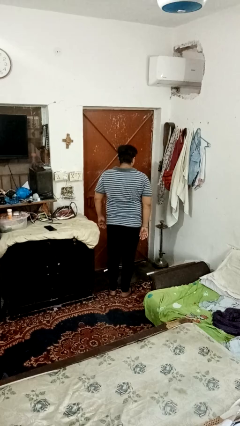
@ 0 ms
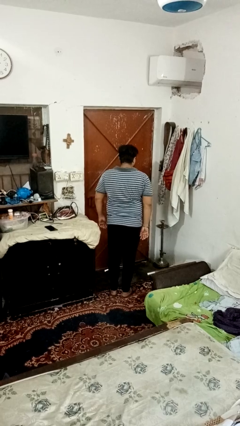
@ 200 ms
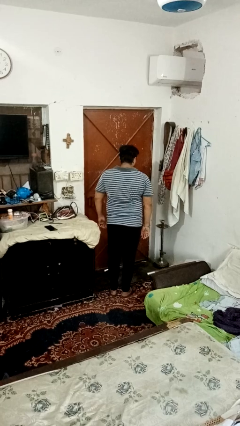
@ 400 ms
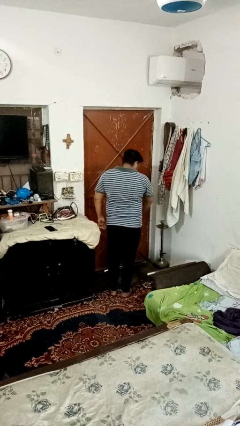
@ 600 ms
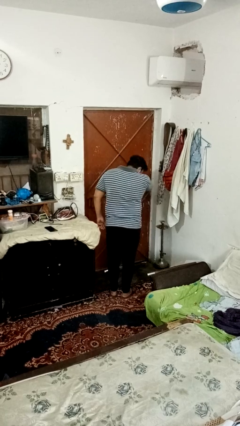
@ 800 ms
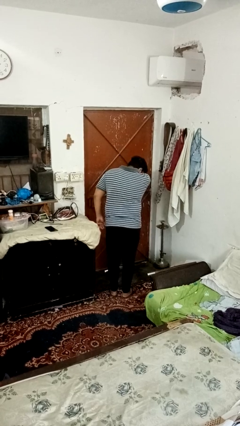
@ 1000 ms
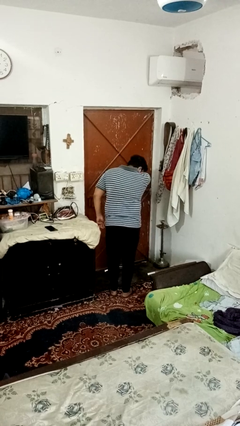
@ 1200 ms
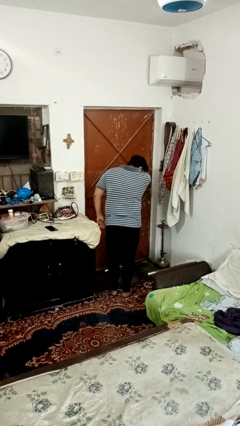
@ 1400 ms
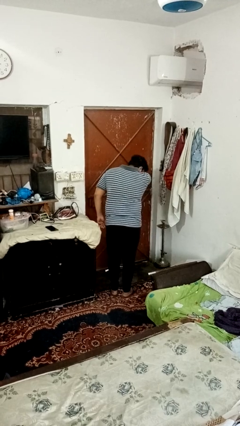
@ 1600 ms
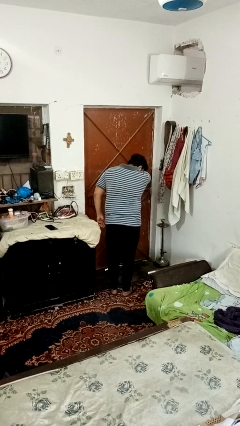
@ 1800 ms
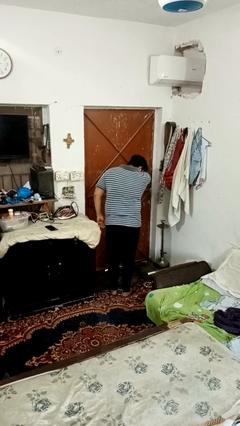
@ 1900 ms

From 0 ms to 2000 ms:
person sneezes into arm

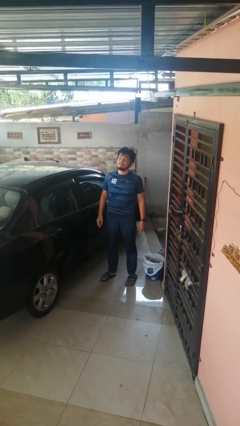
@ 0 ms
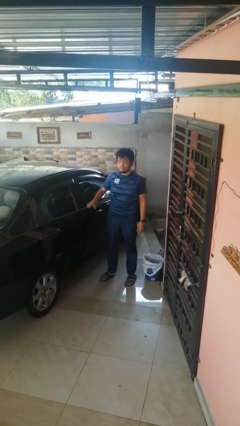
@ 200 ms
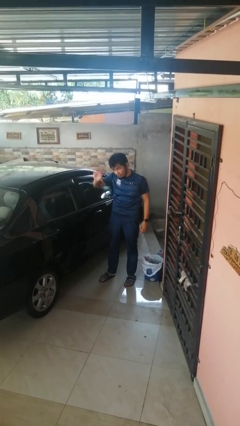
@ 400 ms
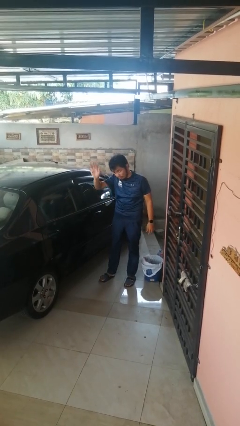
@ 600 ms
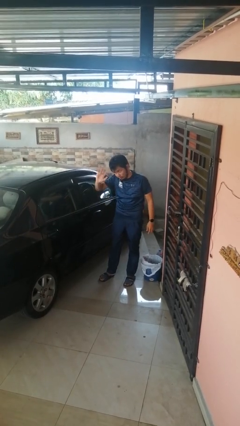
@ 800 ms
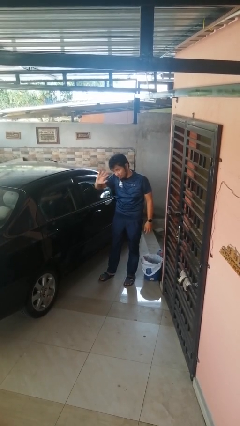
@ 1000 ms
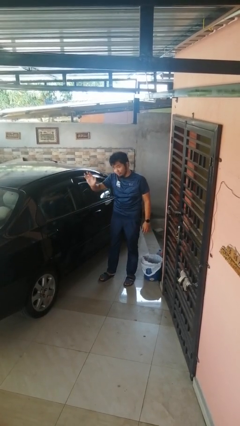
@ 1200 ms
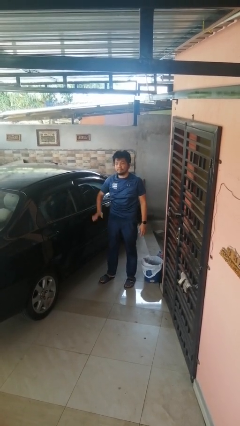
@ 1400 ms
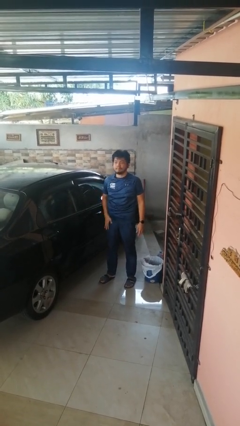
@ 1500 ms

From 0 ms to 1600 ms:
person waves at person

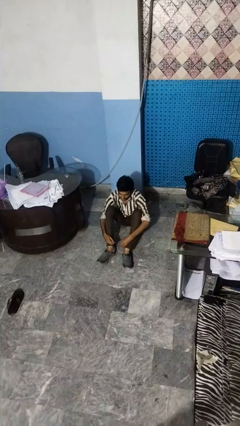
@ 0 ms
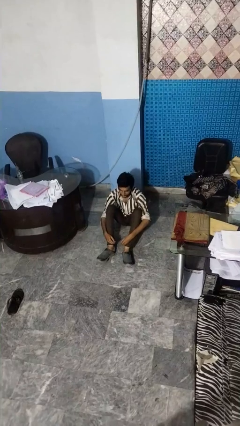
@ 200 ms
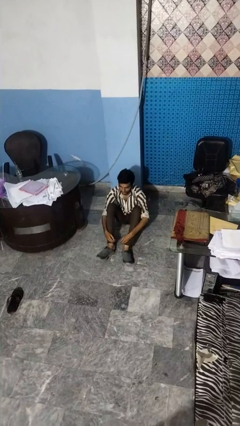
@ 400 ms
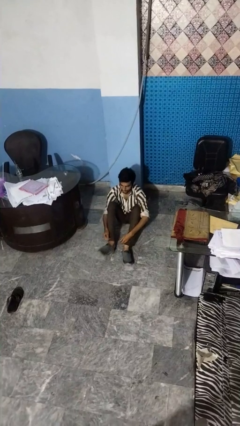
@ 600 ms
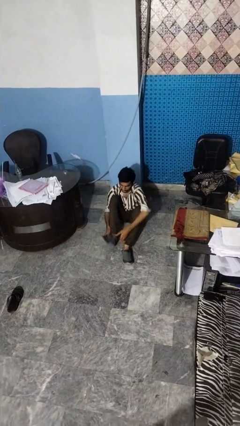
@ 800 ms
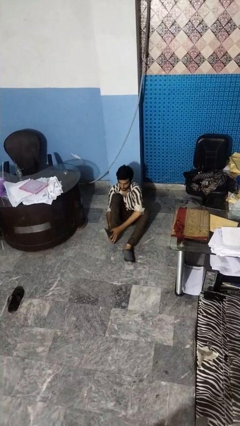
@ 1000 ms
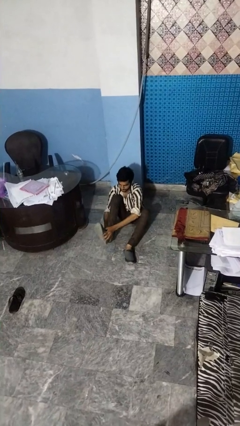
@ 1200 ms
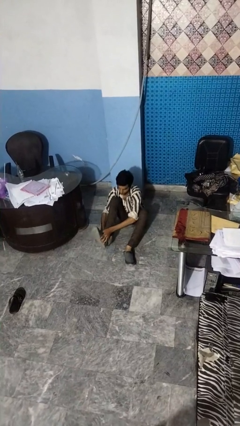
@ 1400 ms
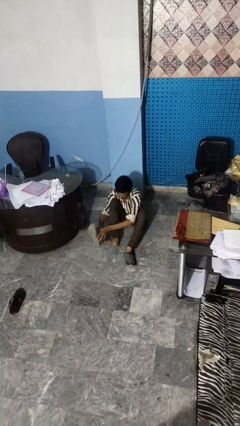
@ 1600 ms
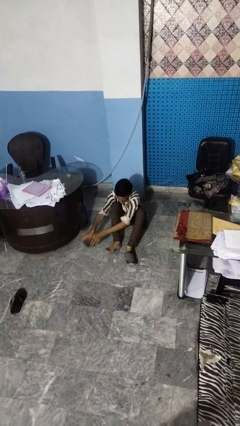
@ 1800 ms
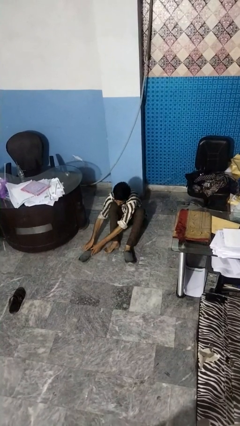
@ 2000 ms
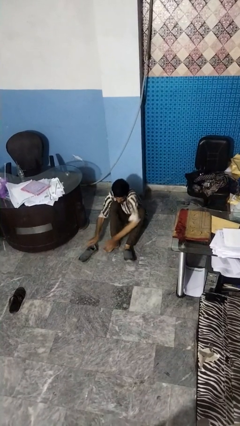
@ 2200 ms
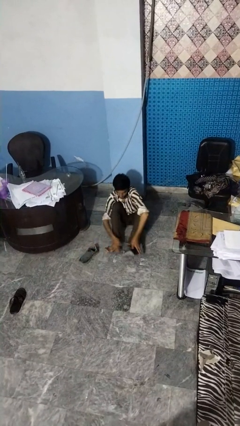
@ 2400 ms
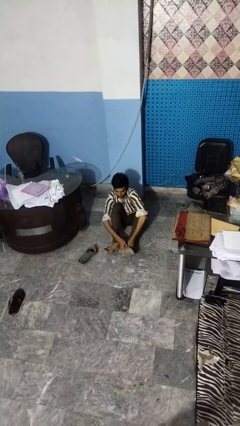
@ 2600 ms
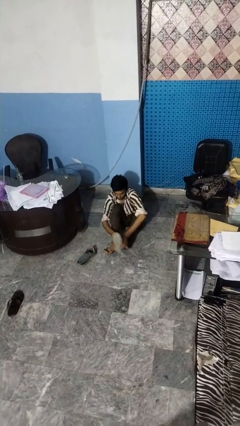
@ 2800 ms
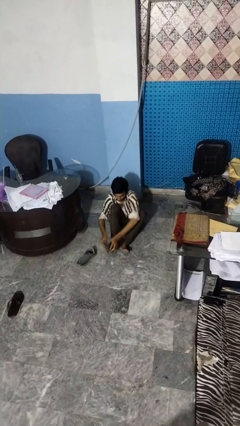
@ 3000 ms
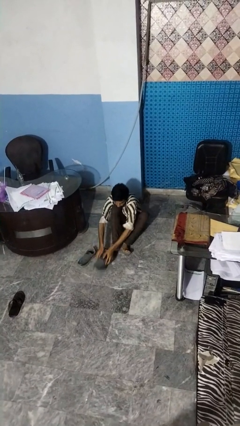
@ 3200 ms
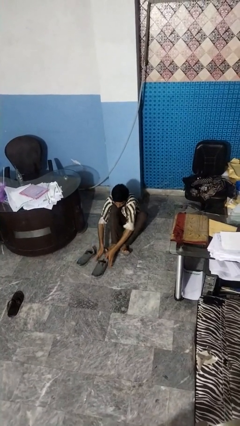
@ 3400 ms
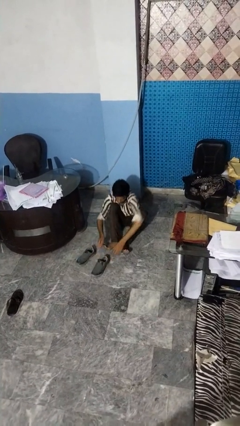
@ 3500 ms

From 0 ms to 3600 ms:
person takes off shoes

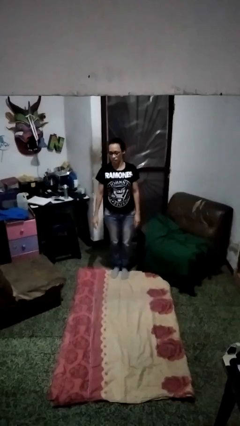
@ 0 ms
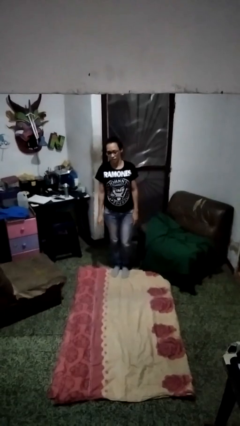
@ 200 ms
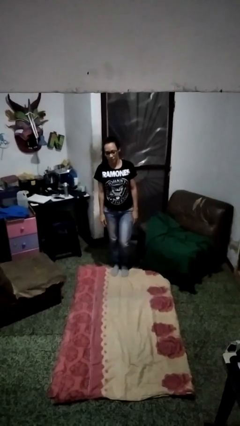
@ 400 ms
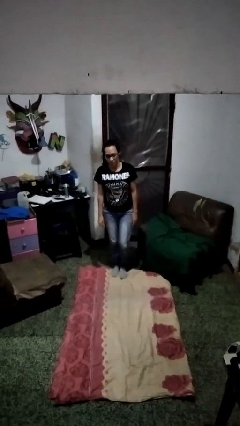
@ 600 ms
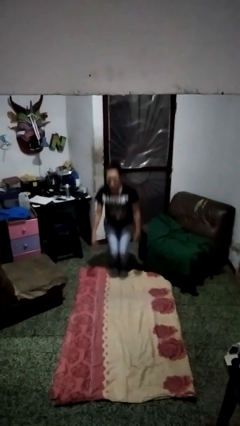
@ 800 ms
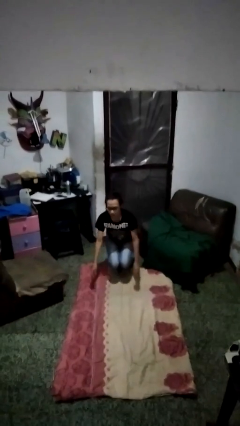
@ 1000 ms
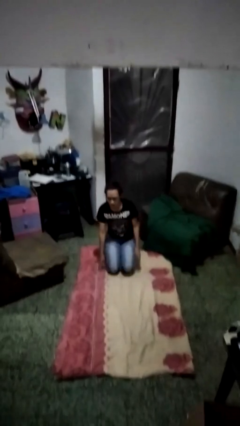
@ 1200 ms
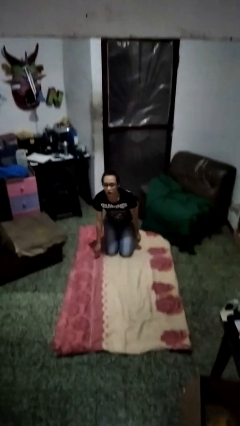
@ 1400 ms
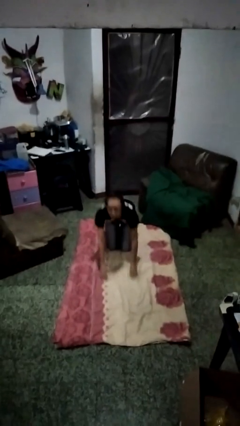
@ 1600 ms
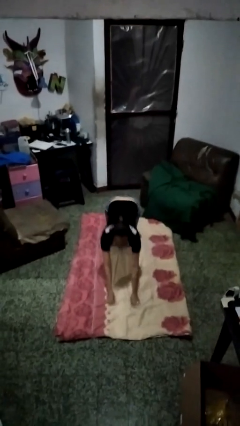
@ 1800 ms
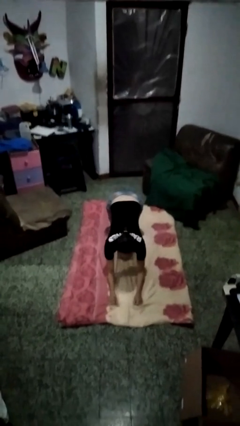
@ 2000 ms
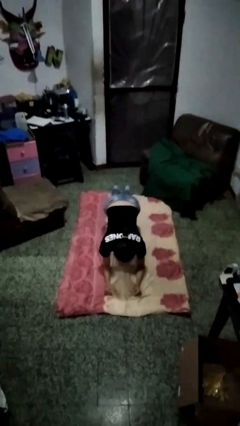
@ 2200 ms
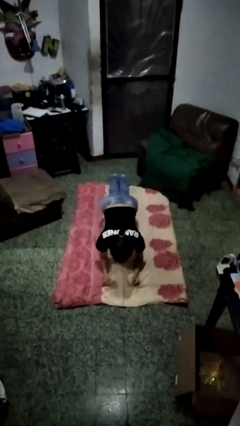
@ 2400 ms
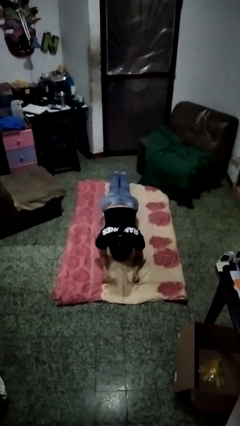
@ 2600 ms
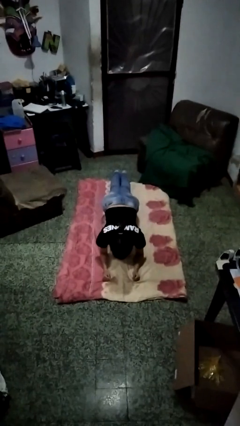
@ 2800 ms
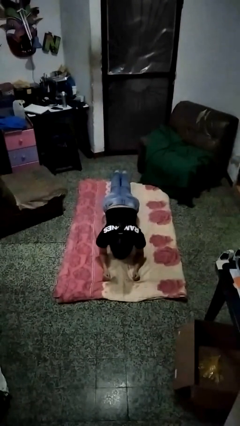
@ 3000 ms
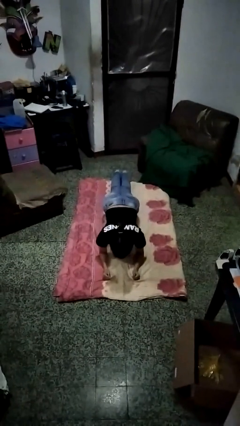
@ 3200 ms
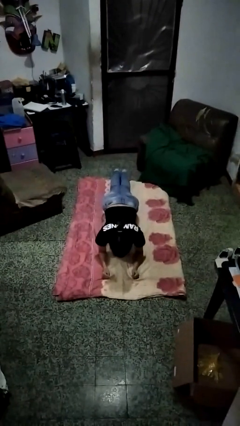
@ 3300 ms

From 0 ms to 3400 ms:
person exercises with plank

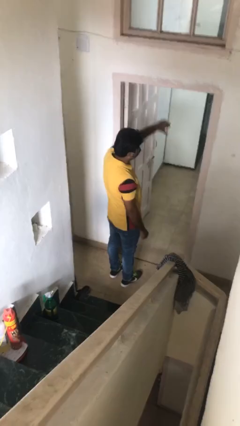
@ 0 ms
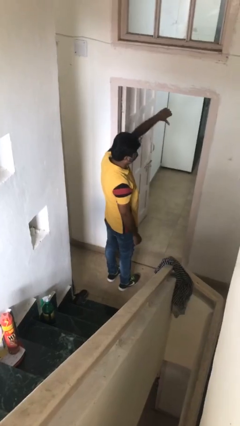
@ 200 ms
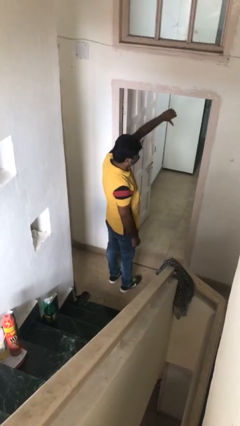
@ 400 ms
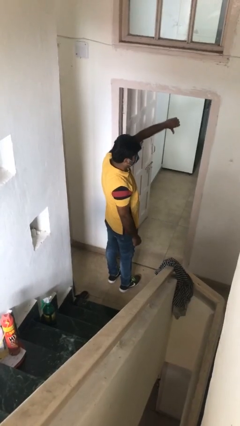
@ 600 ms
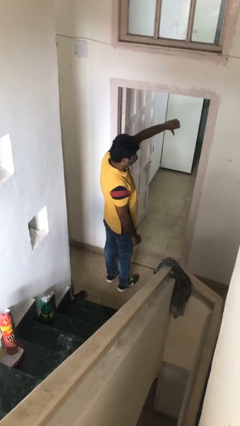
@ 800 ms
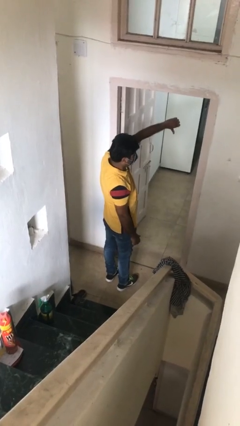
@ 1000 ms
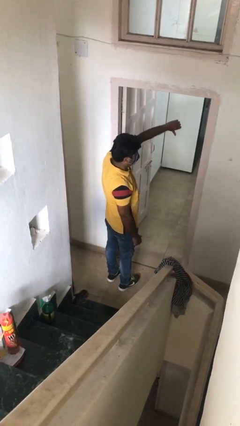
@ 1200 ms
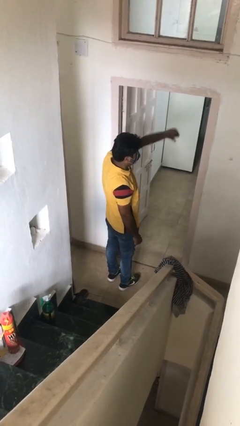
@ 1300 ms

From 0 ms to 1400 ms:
person gestures thumbs down

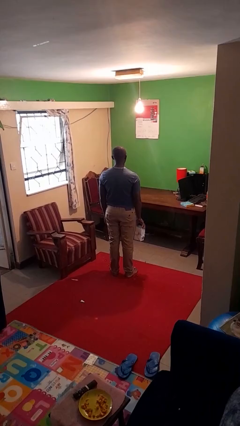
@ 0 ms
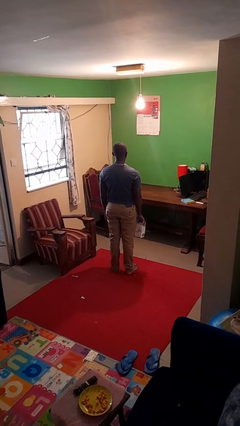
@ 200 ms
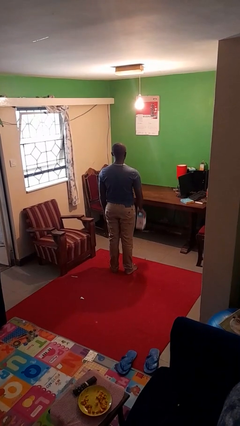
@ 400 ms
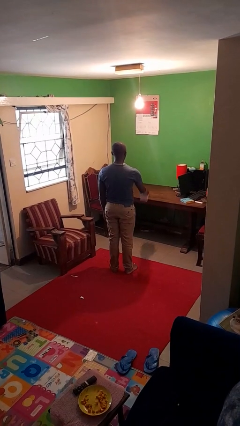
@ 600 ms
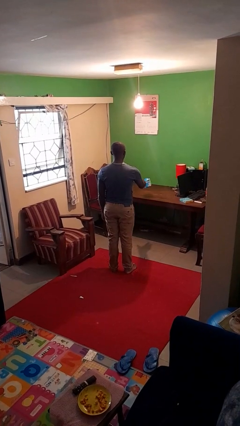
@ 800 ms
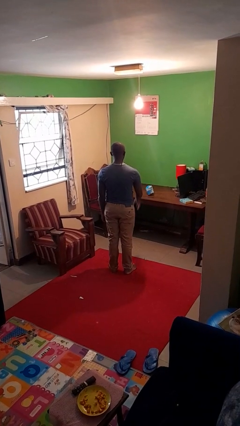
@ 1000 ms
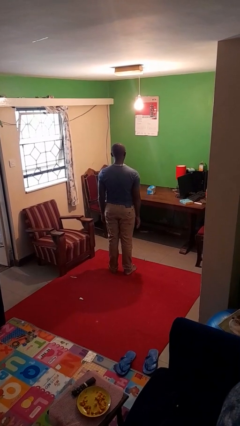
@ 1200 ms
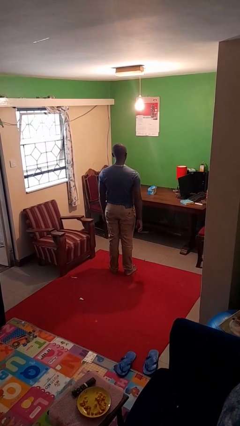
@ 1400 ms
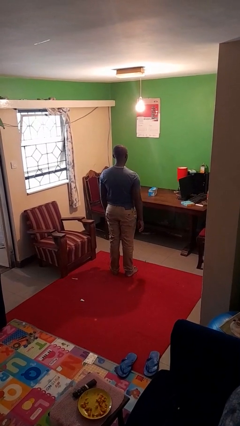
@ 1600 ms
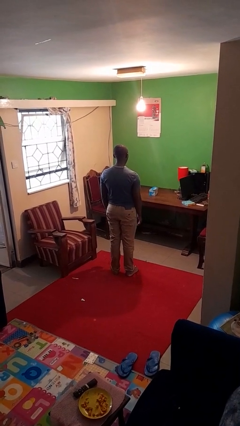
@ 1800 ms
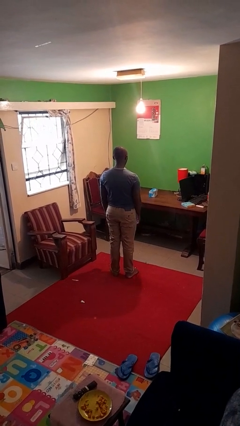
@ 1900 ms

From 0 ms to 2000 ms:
person throws object on table

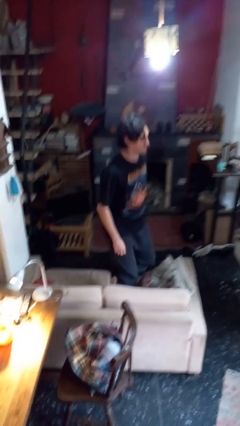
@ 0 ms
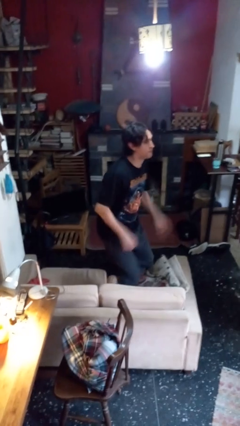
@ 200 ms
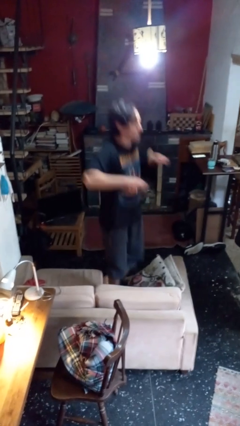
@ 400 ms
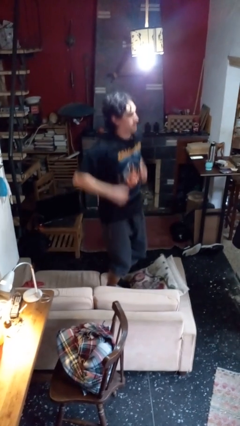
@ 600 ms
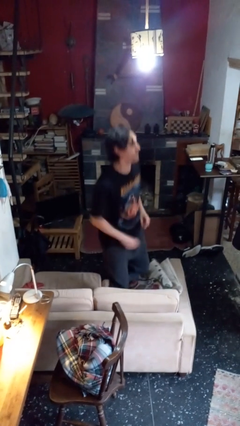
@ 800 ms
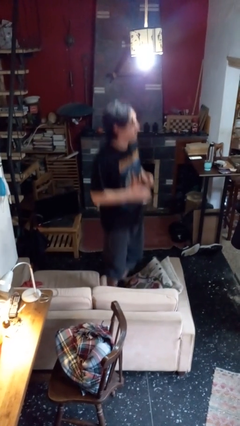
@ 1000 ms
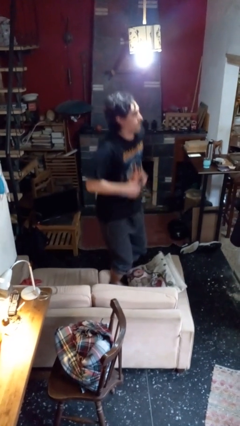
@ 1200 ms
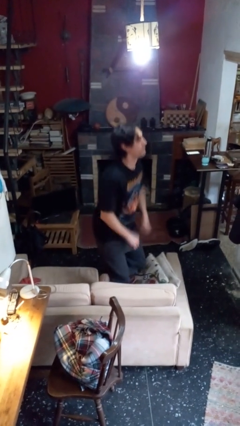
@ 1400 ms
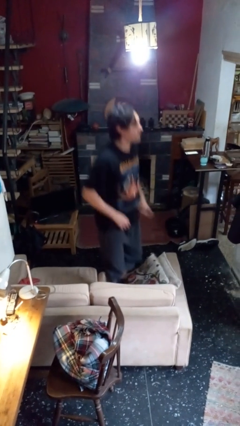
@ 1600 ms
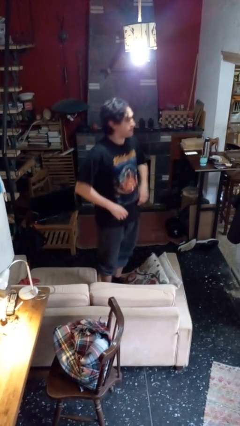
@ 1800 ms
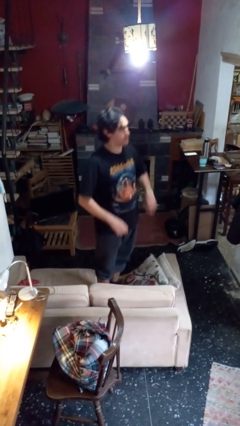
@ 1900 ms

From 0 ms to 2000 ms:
person jumps on couch

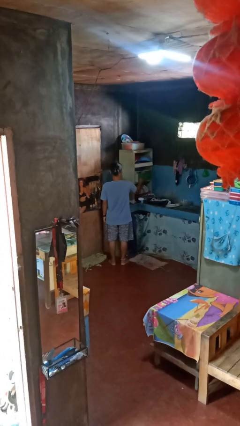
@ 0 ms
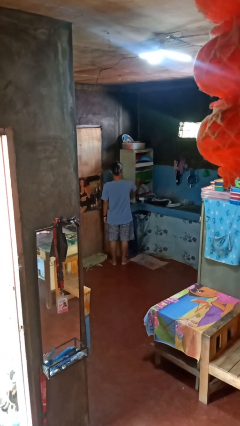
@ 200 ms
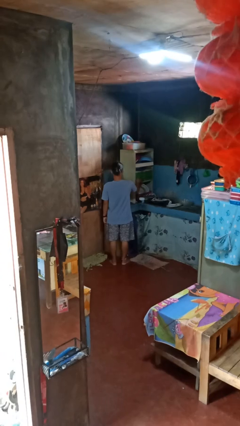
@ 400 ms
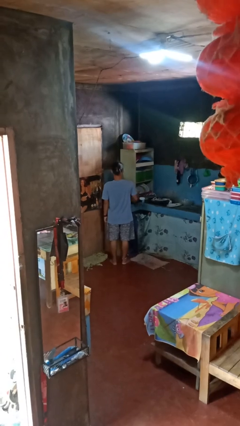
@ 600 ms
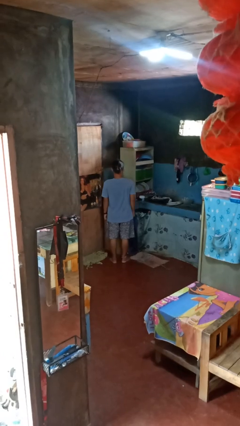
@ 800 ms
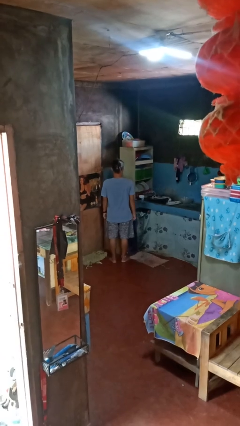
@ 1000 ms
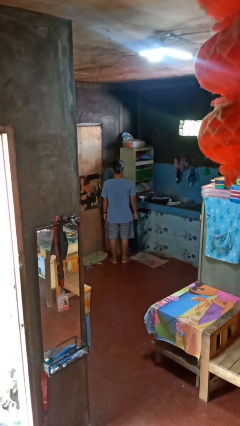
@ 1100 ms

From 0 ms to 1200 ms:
person closes kitchen drawer
